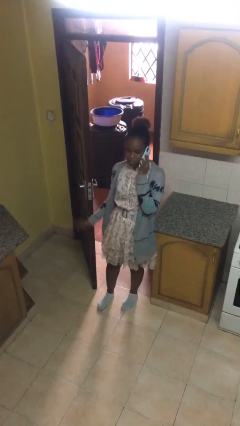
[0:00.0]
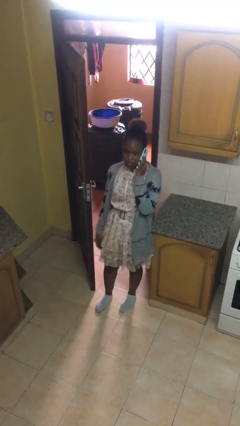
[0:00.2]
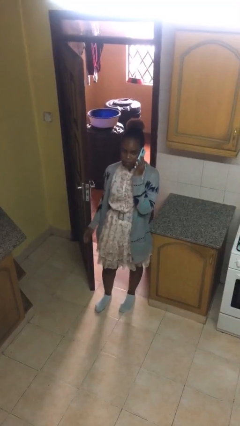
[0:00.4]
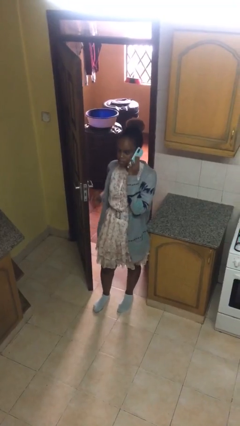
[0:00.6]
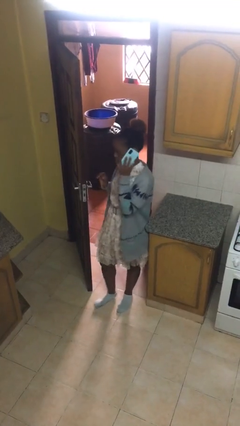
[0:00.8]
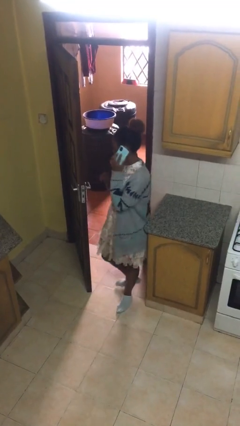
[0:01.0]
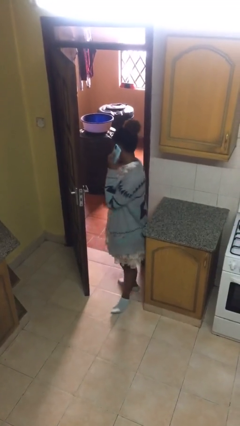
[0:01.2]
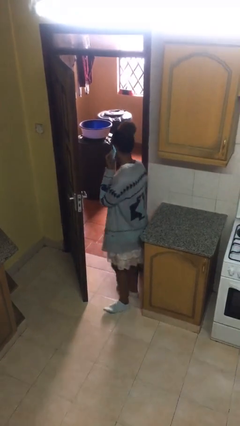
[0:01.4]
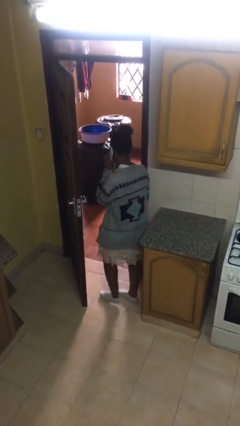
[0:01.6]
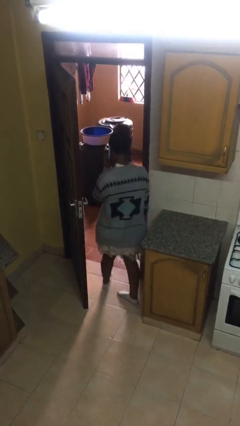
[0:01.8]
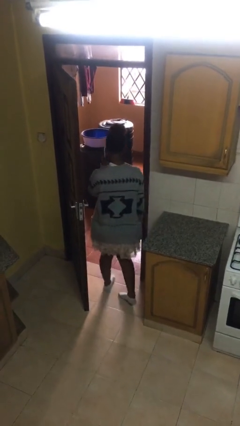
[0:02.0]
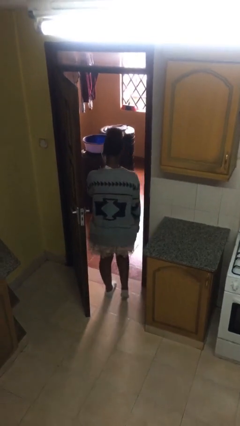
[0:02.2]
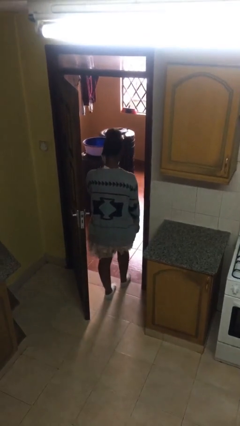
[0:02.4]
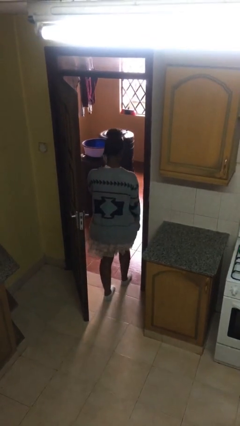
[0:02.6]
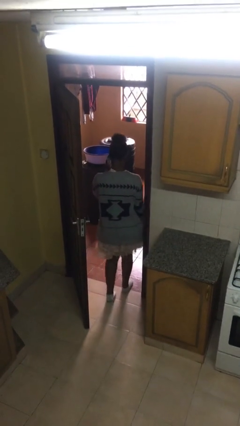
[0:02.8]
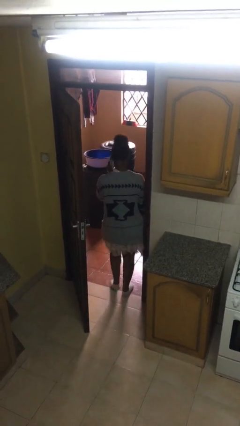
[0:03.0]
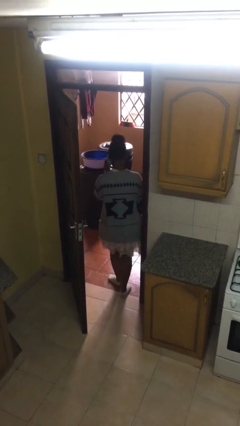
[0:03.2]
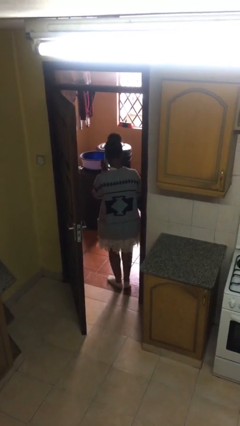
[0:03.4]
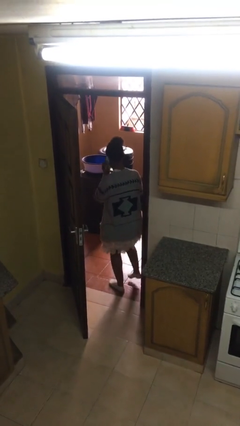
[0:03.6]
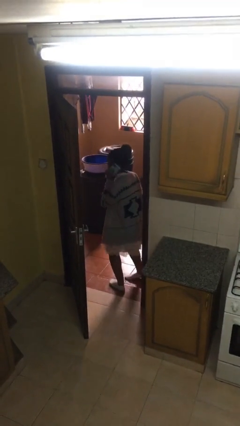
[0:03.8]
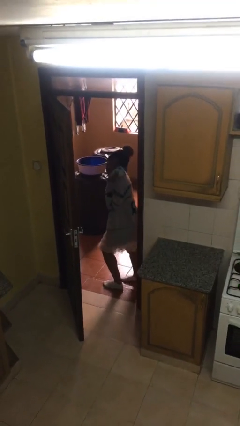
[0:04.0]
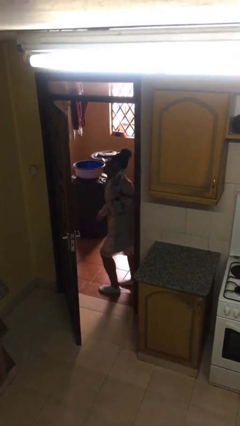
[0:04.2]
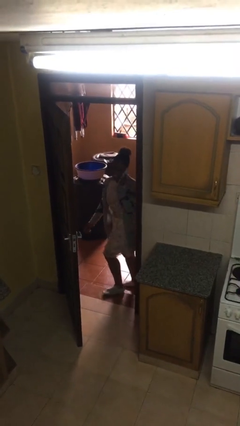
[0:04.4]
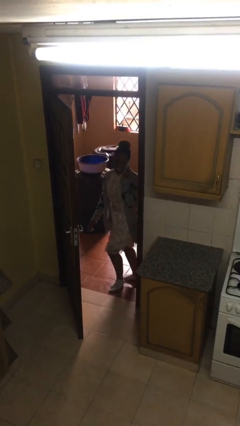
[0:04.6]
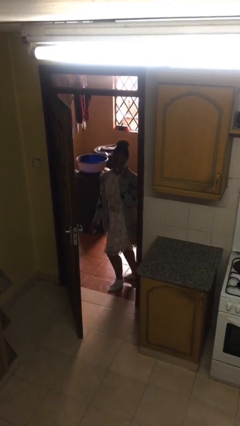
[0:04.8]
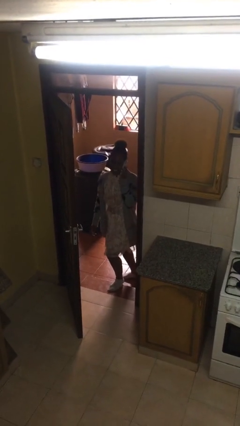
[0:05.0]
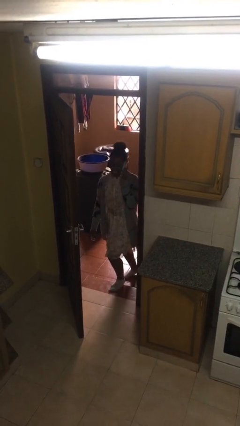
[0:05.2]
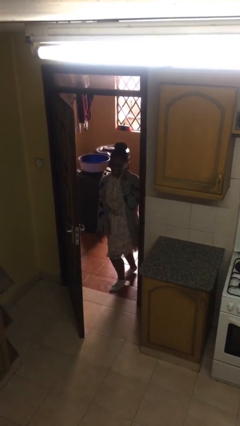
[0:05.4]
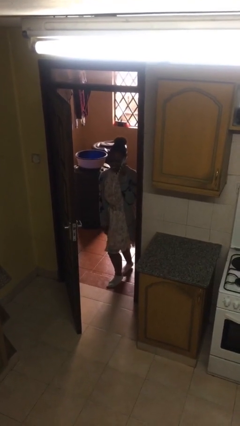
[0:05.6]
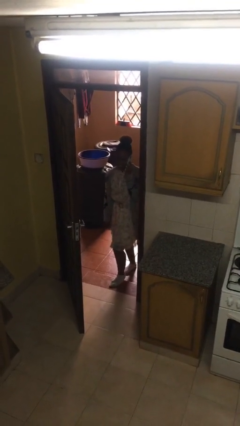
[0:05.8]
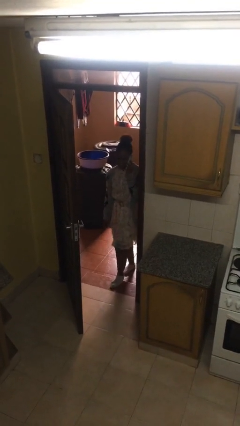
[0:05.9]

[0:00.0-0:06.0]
person exits scene through structure

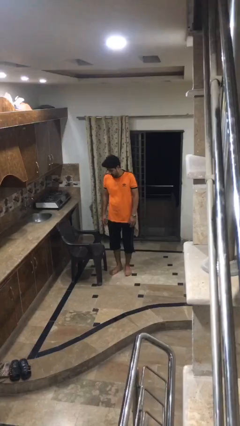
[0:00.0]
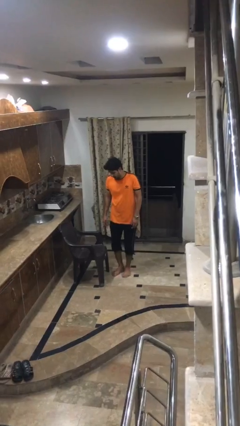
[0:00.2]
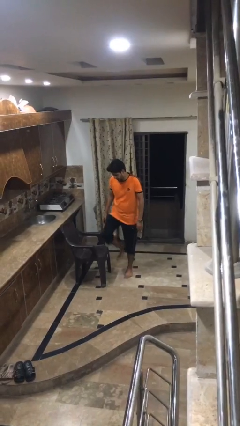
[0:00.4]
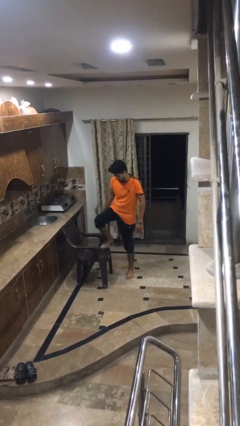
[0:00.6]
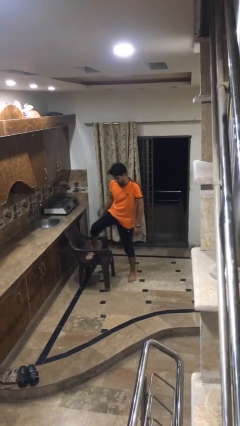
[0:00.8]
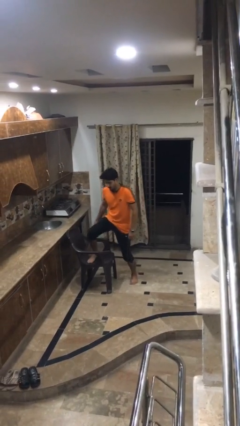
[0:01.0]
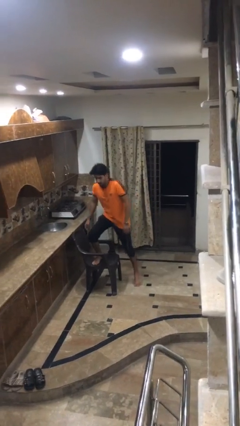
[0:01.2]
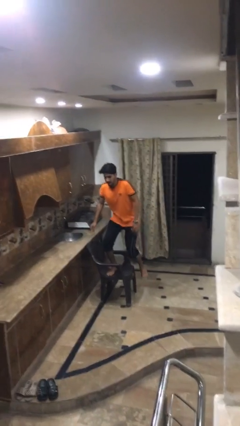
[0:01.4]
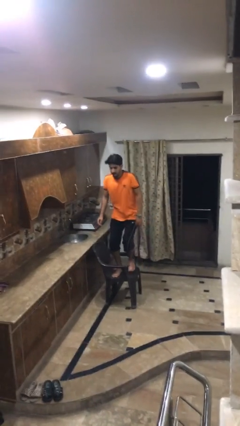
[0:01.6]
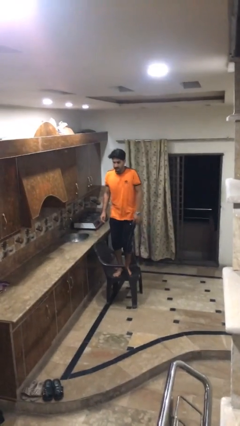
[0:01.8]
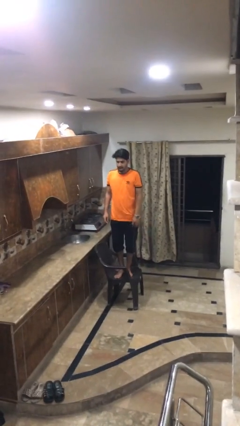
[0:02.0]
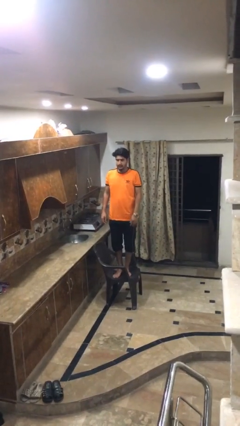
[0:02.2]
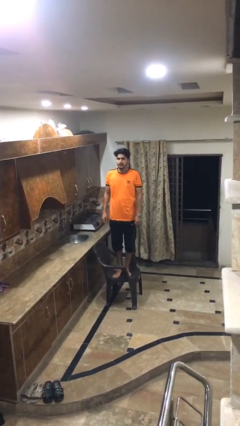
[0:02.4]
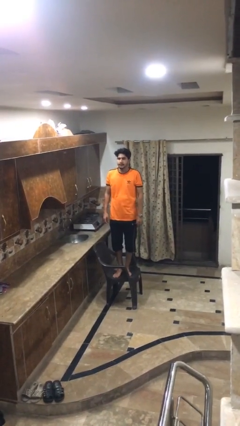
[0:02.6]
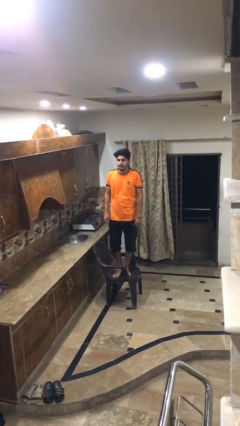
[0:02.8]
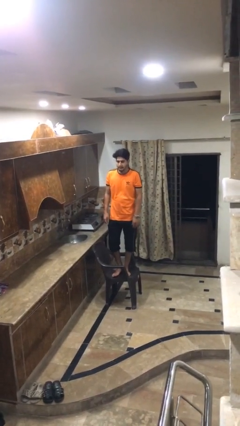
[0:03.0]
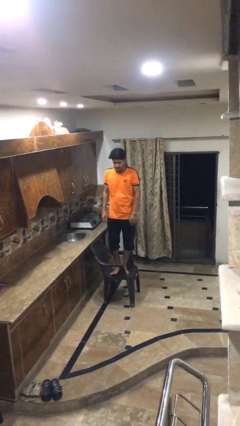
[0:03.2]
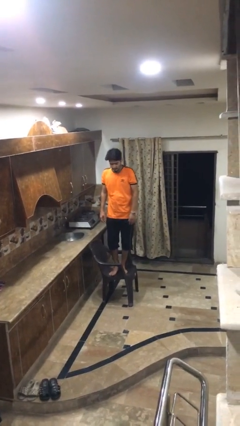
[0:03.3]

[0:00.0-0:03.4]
person climbs on chair

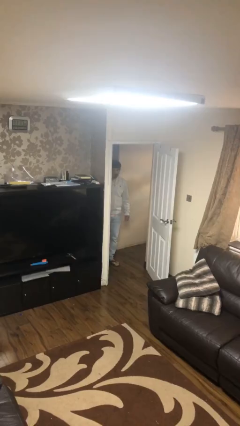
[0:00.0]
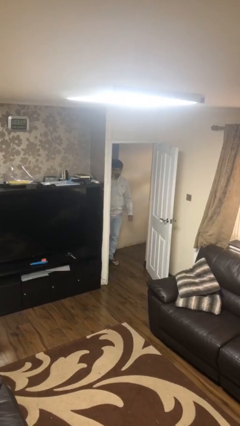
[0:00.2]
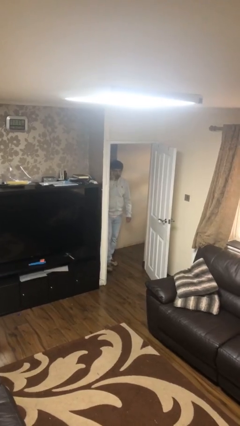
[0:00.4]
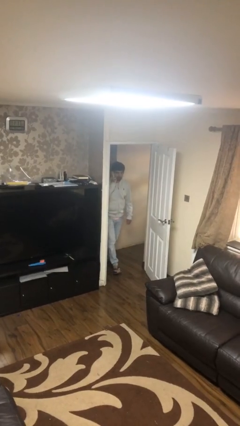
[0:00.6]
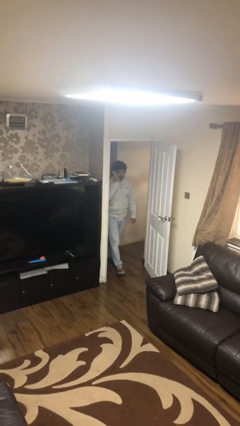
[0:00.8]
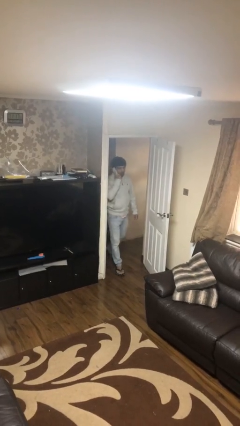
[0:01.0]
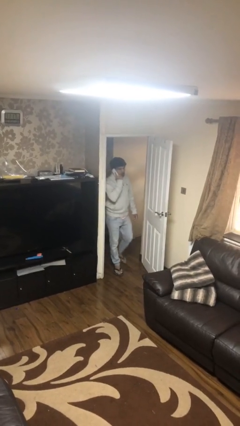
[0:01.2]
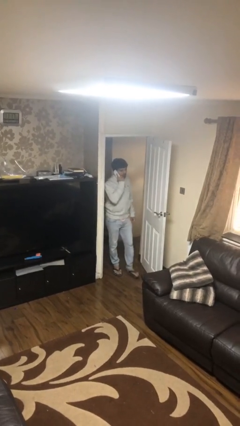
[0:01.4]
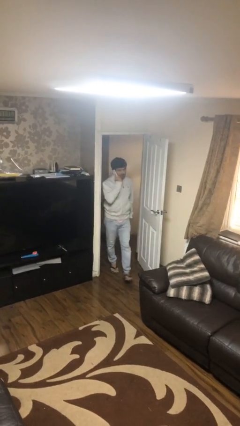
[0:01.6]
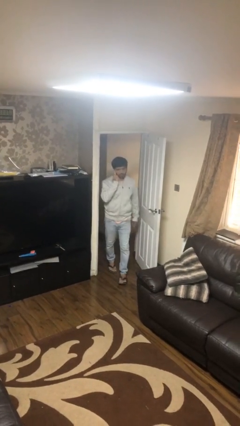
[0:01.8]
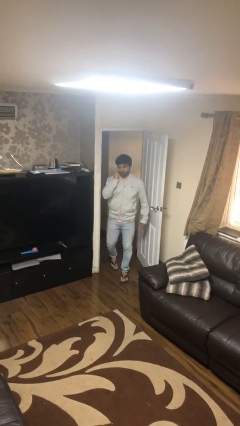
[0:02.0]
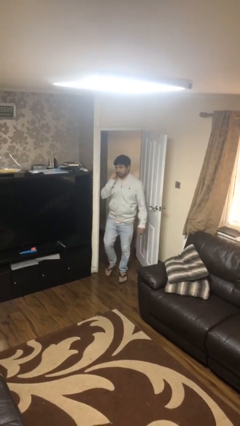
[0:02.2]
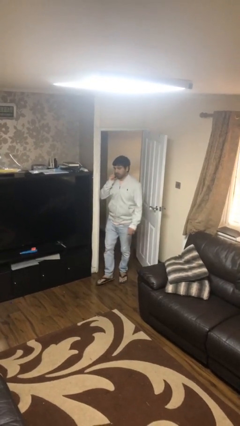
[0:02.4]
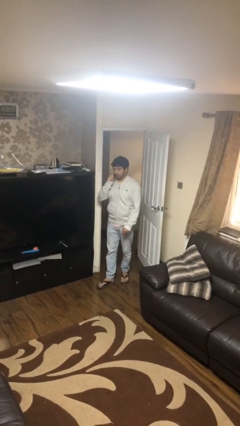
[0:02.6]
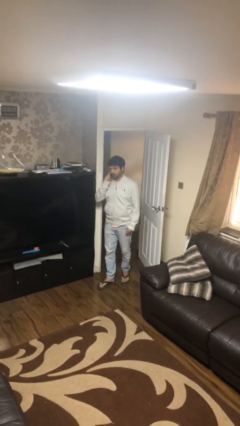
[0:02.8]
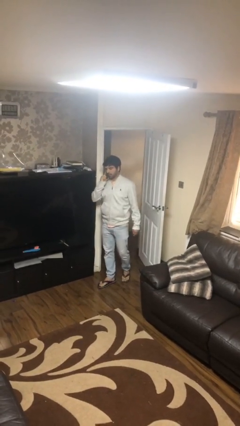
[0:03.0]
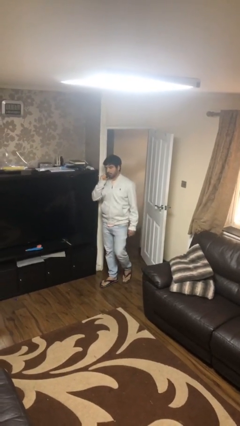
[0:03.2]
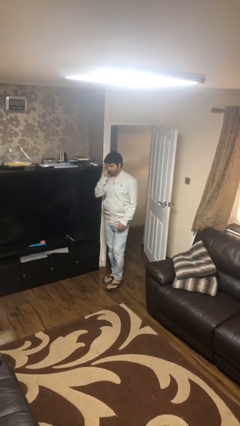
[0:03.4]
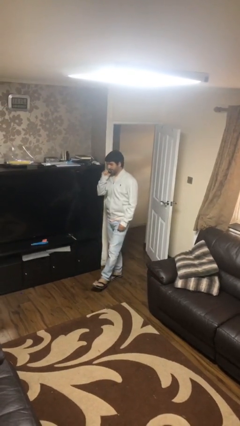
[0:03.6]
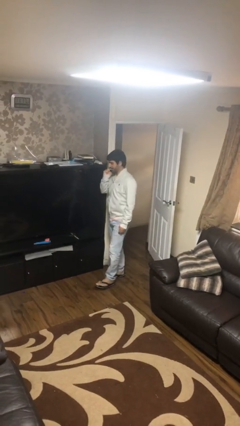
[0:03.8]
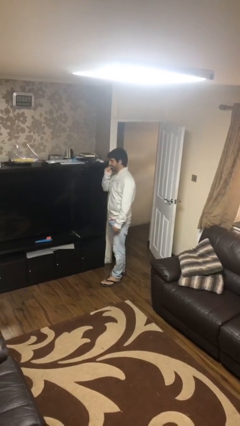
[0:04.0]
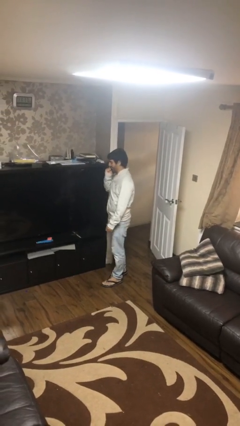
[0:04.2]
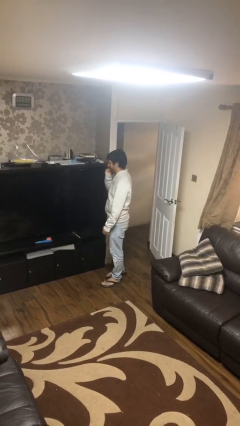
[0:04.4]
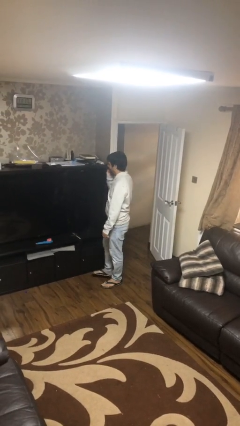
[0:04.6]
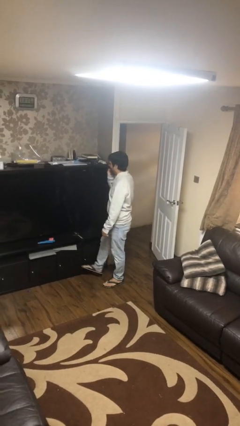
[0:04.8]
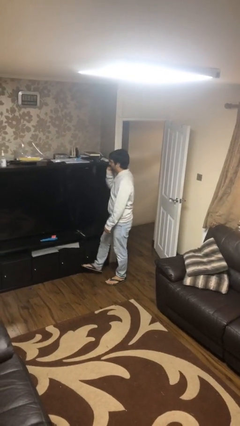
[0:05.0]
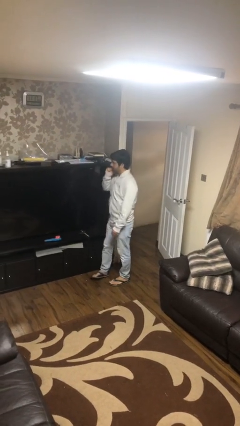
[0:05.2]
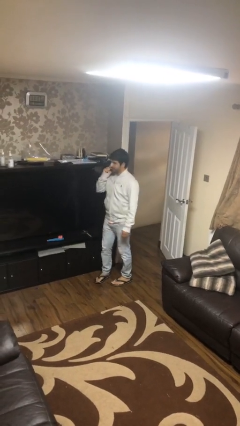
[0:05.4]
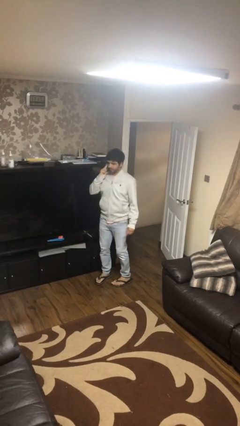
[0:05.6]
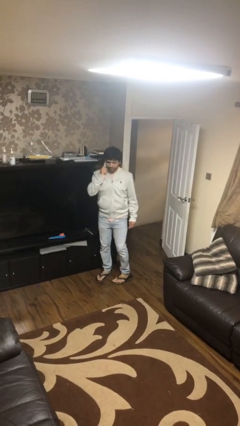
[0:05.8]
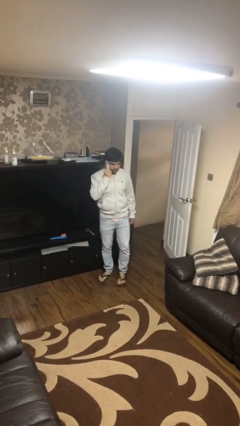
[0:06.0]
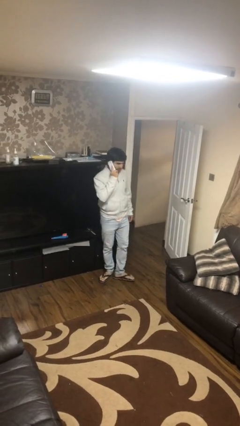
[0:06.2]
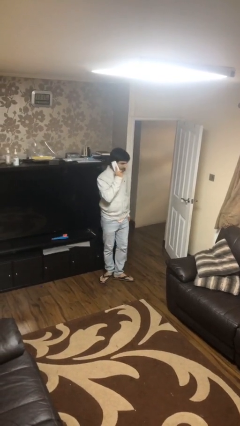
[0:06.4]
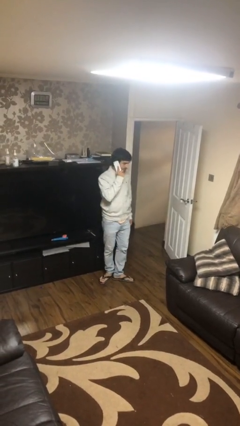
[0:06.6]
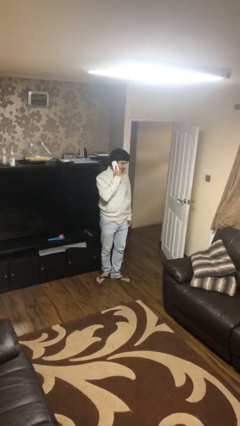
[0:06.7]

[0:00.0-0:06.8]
person enters scene through structure

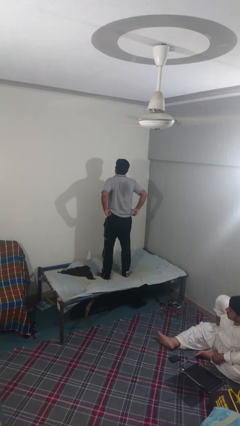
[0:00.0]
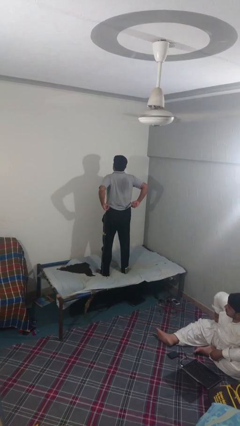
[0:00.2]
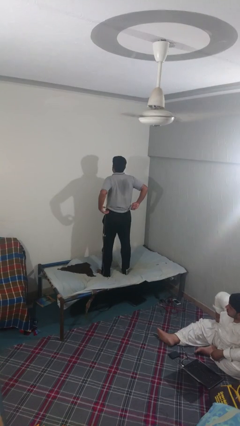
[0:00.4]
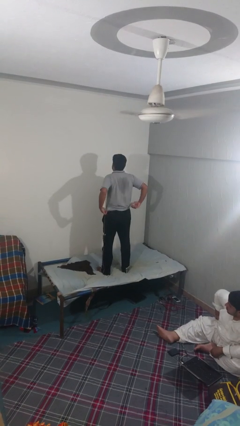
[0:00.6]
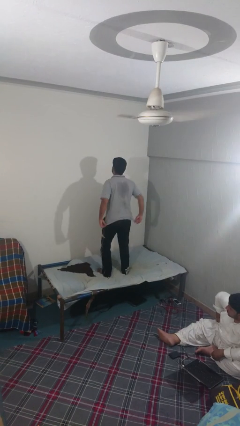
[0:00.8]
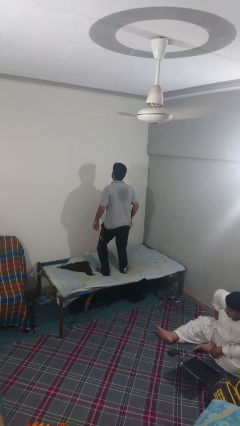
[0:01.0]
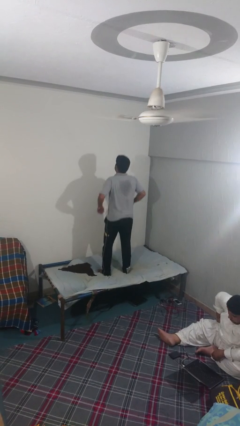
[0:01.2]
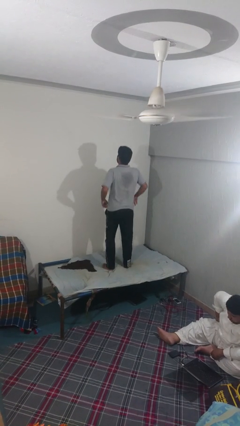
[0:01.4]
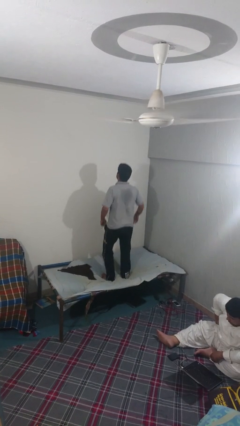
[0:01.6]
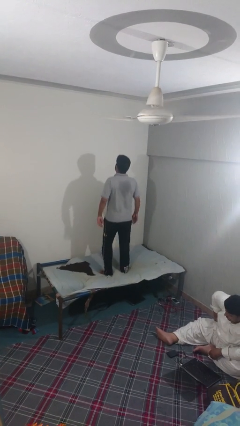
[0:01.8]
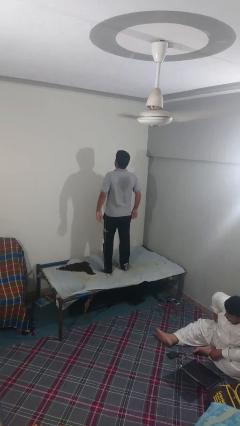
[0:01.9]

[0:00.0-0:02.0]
person jumps on bed

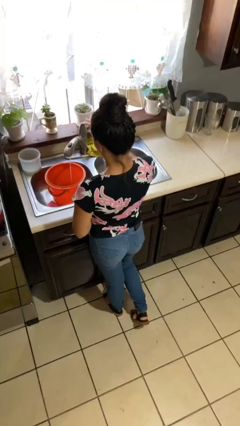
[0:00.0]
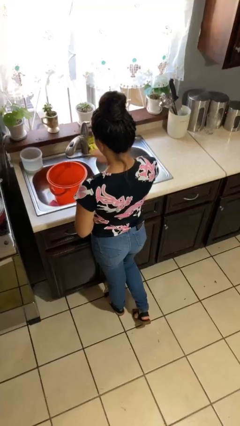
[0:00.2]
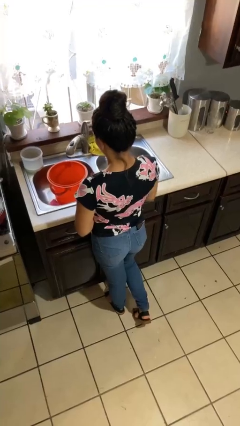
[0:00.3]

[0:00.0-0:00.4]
person turns off faucet
